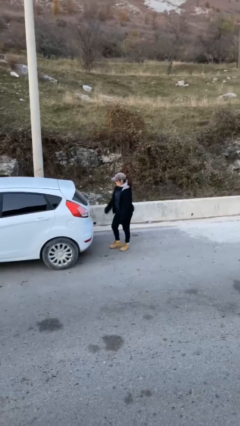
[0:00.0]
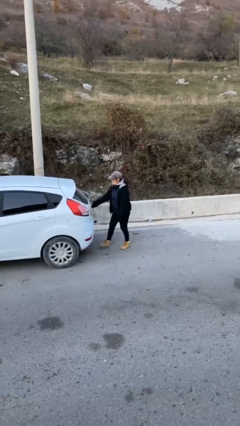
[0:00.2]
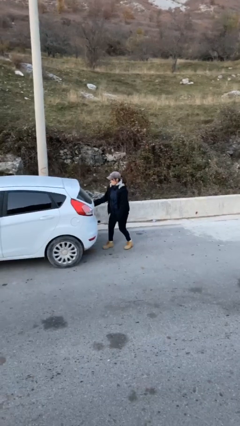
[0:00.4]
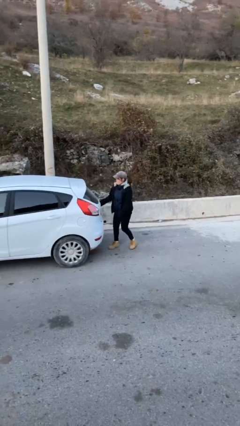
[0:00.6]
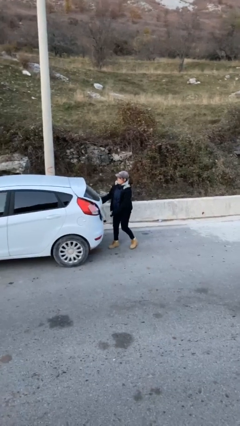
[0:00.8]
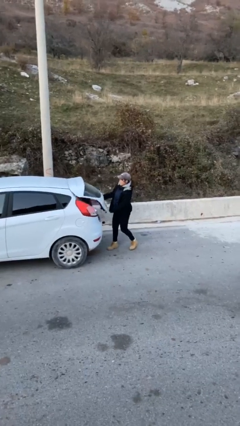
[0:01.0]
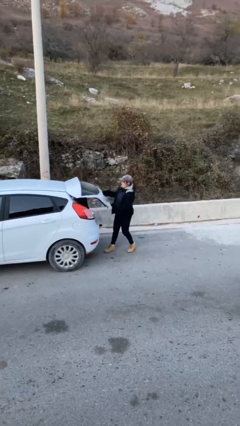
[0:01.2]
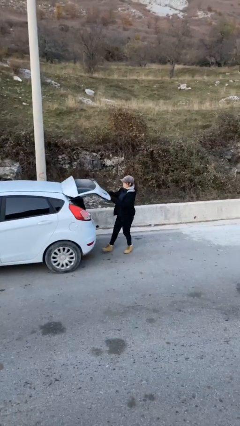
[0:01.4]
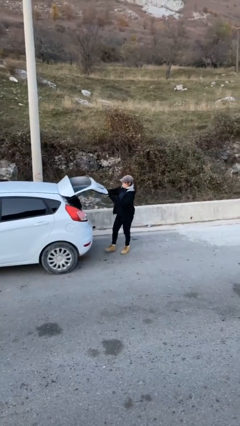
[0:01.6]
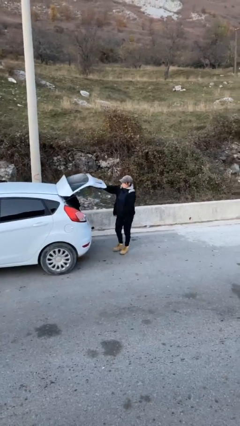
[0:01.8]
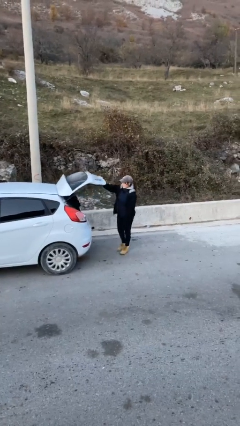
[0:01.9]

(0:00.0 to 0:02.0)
person opens car trunk

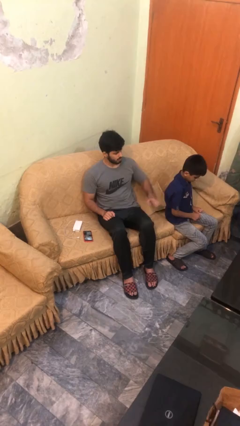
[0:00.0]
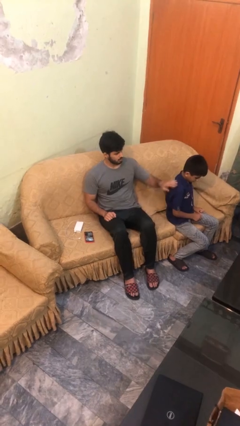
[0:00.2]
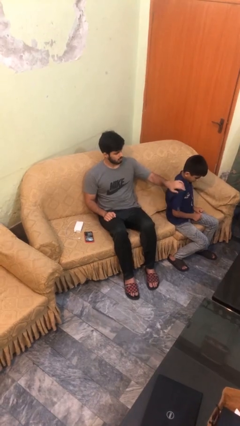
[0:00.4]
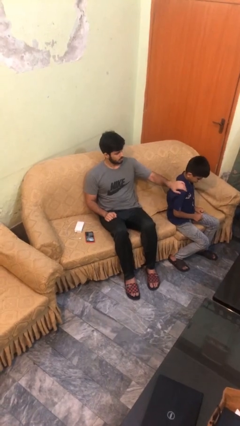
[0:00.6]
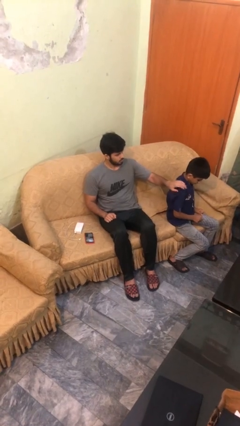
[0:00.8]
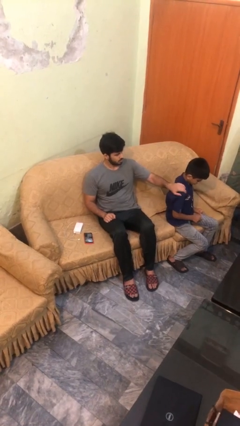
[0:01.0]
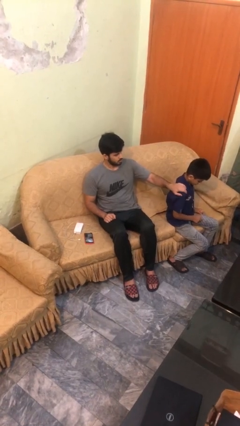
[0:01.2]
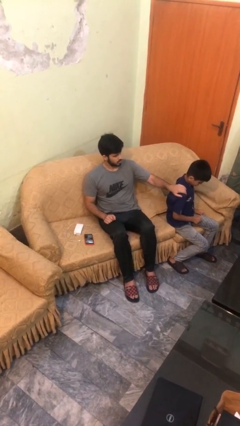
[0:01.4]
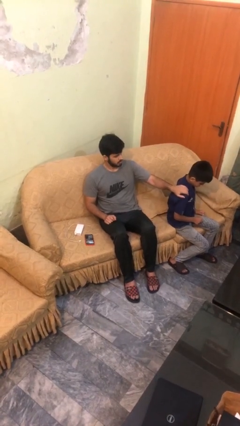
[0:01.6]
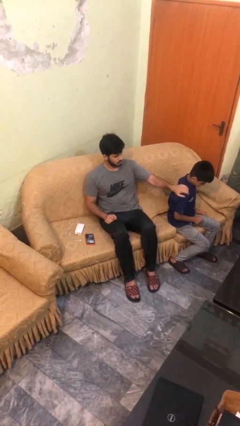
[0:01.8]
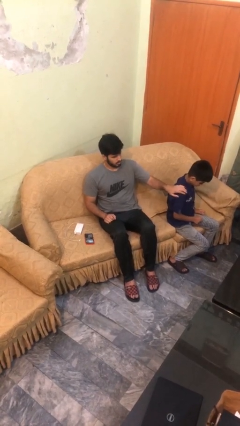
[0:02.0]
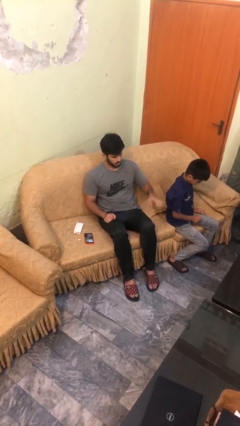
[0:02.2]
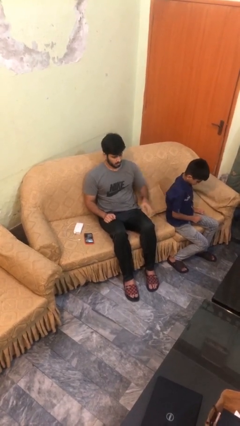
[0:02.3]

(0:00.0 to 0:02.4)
person pounds shoulders of person

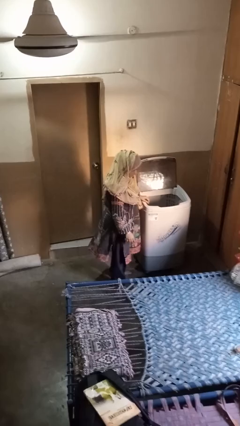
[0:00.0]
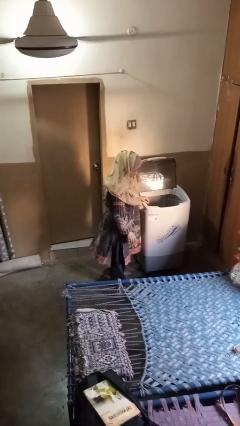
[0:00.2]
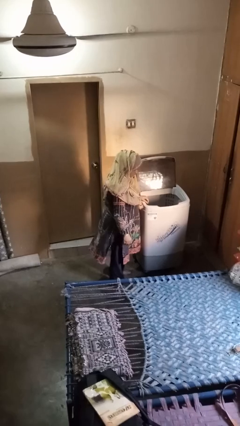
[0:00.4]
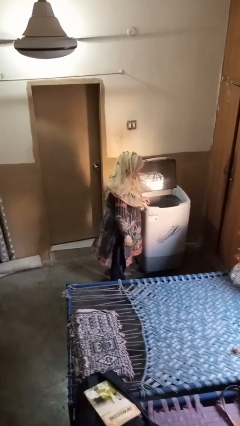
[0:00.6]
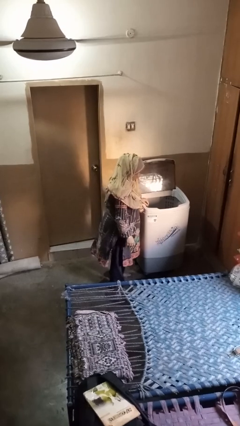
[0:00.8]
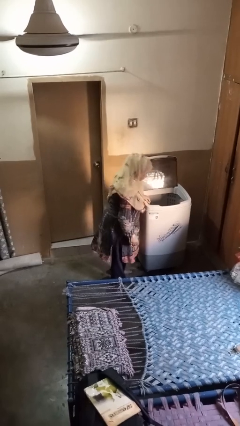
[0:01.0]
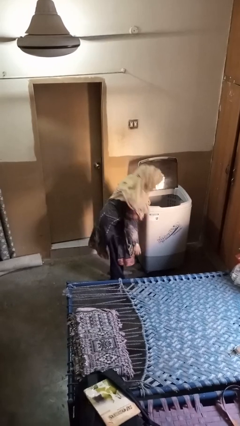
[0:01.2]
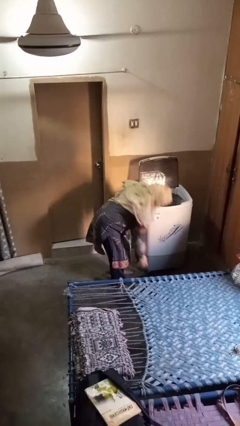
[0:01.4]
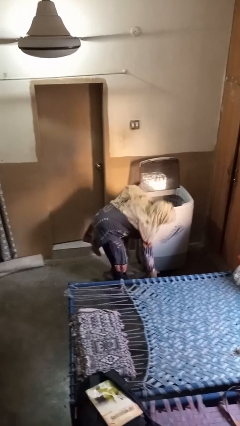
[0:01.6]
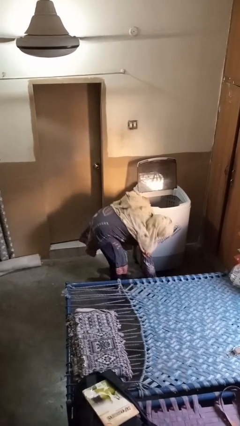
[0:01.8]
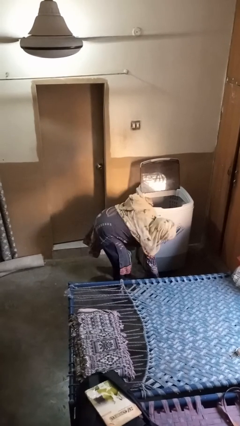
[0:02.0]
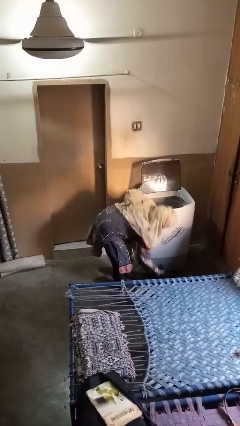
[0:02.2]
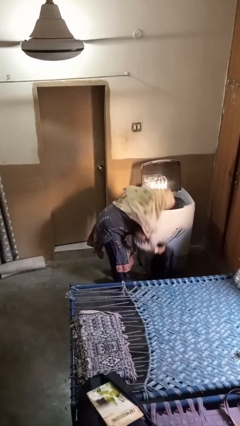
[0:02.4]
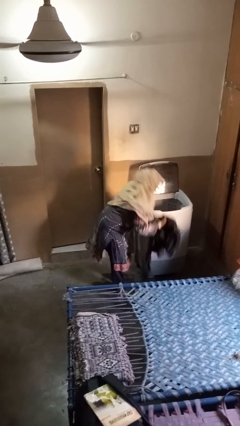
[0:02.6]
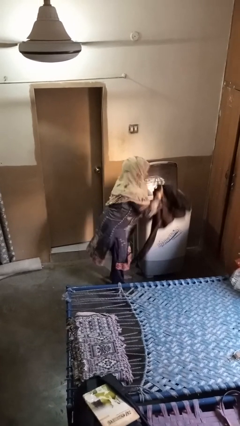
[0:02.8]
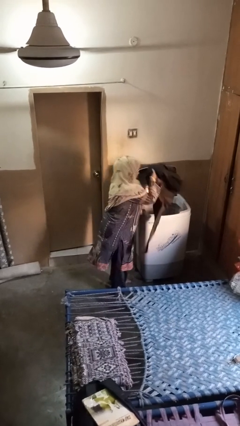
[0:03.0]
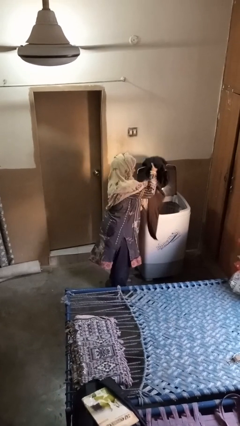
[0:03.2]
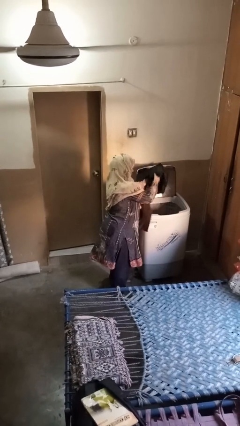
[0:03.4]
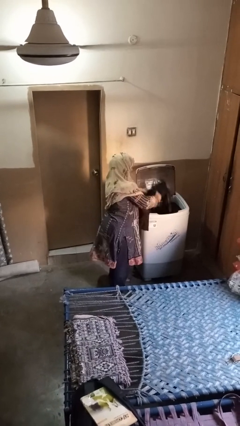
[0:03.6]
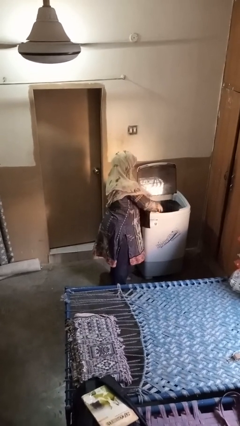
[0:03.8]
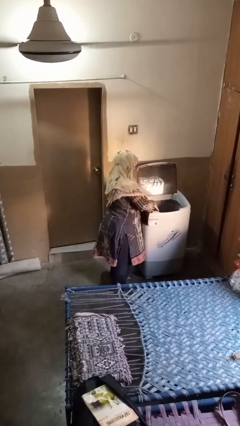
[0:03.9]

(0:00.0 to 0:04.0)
person loads clotheswasher

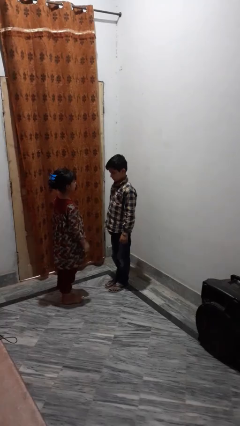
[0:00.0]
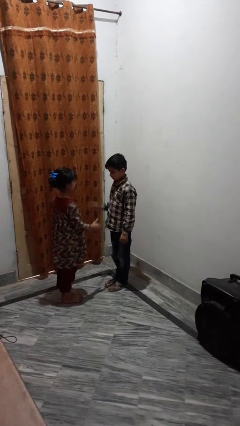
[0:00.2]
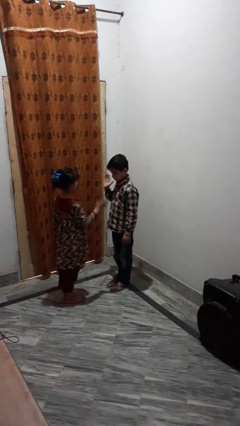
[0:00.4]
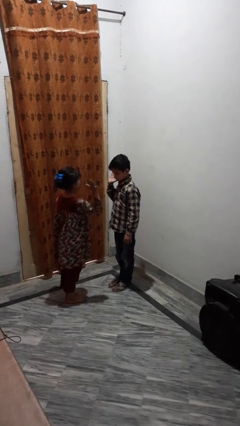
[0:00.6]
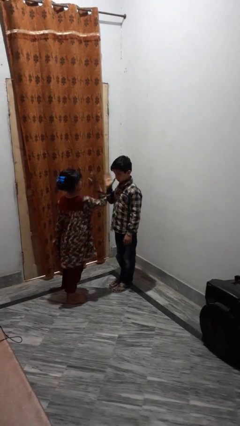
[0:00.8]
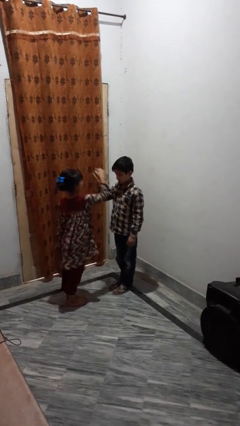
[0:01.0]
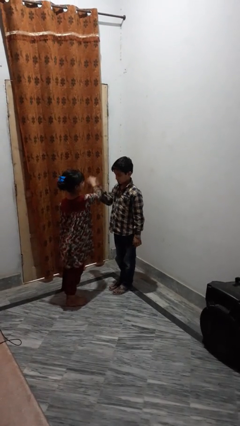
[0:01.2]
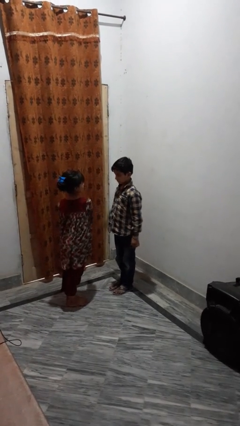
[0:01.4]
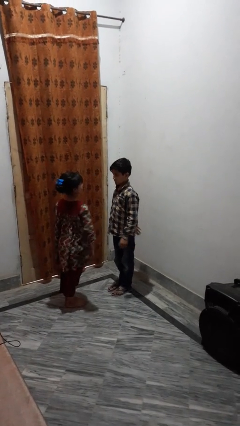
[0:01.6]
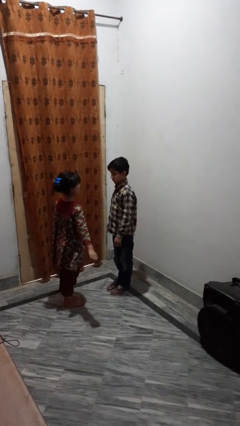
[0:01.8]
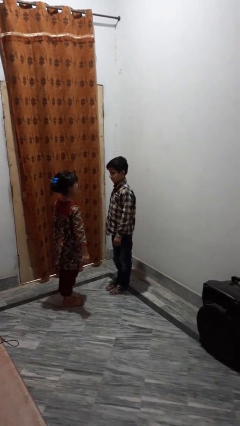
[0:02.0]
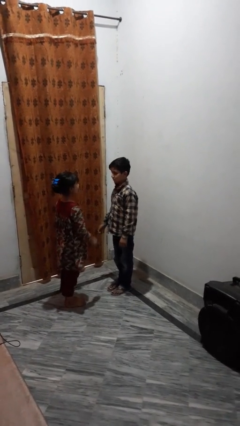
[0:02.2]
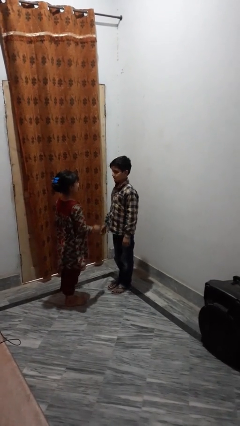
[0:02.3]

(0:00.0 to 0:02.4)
person highfives hand

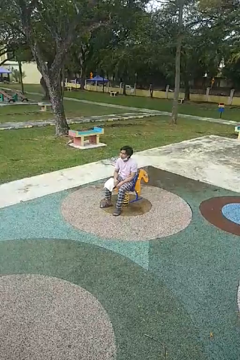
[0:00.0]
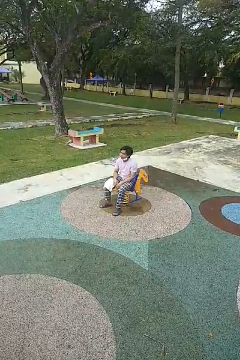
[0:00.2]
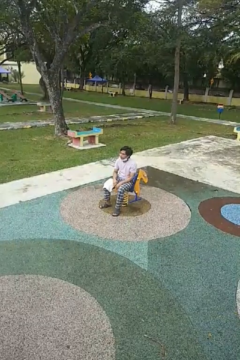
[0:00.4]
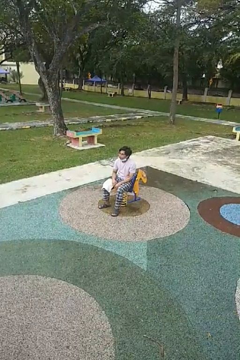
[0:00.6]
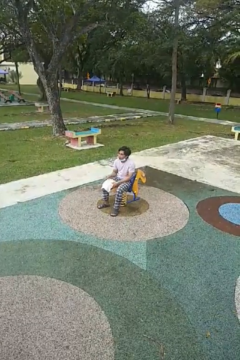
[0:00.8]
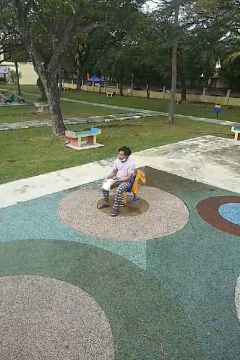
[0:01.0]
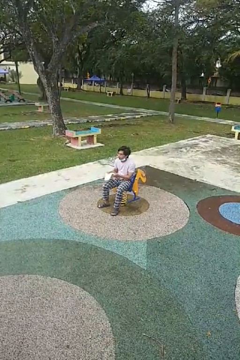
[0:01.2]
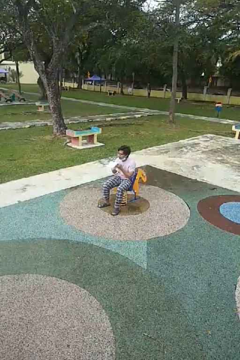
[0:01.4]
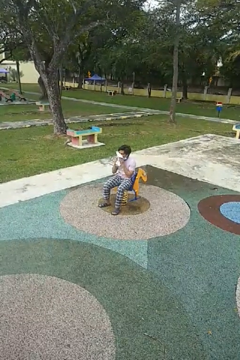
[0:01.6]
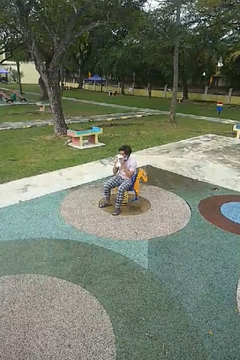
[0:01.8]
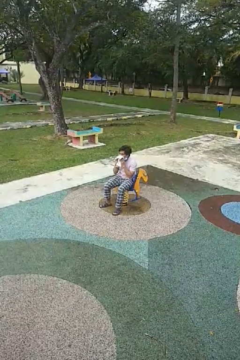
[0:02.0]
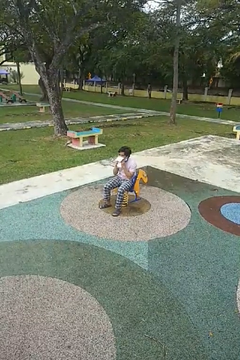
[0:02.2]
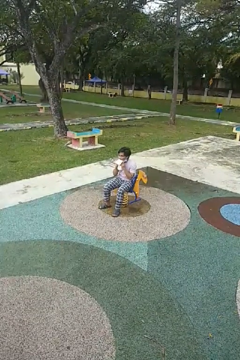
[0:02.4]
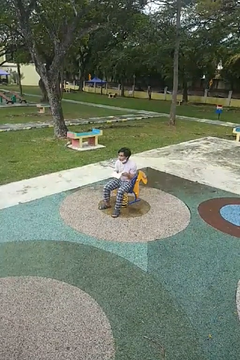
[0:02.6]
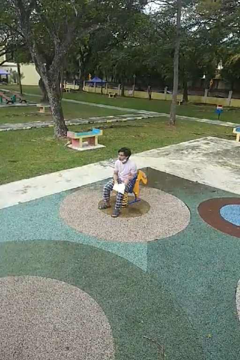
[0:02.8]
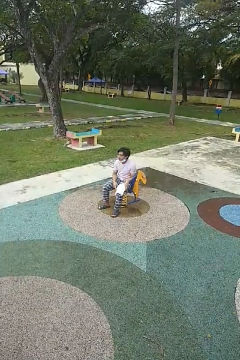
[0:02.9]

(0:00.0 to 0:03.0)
person wipes mouth with napkin

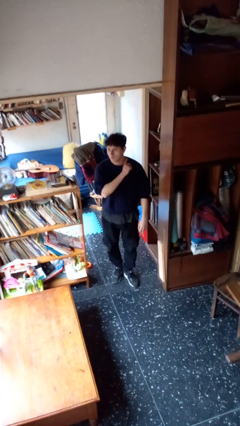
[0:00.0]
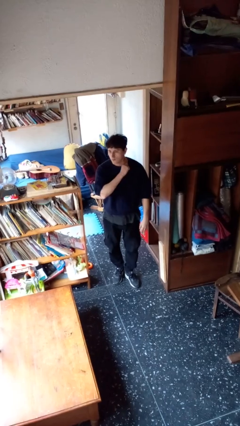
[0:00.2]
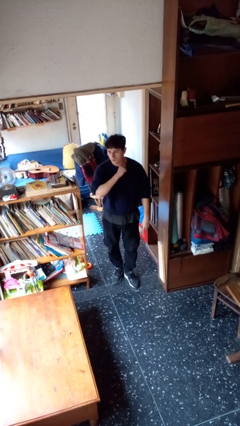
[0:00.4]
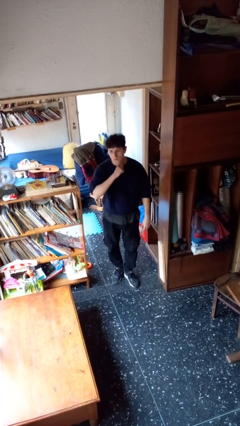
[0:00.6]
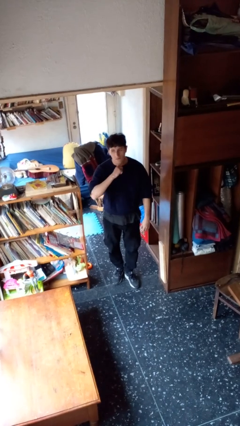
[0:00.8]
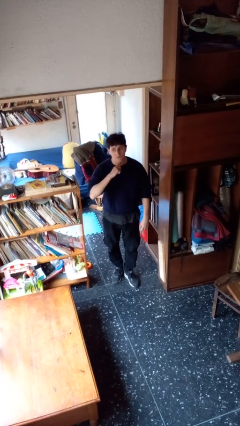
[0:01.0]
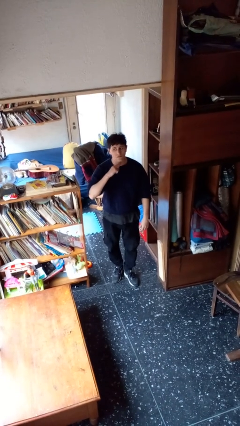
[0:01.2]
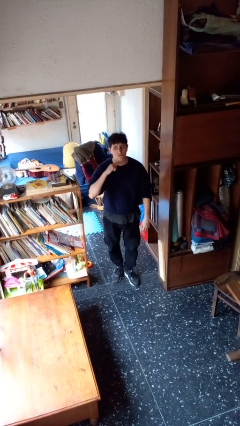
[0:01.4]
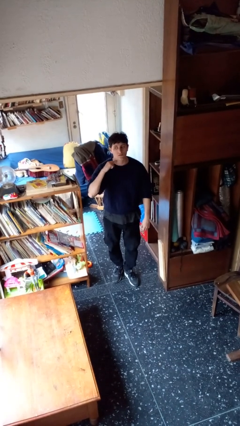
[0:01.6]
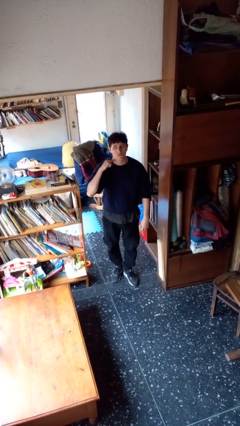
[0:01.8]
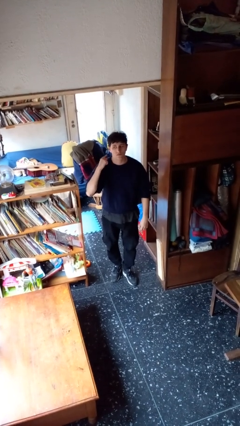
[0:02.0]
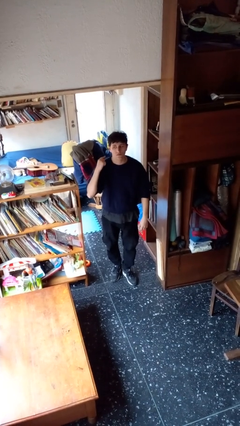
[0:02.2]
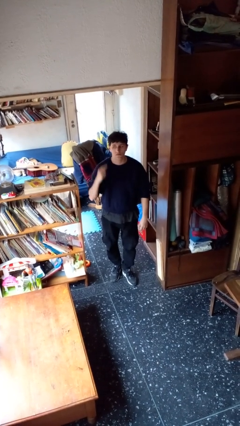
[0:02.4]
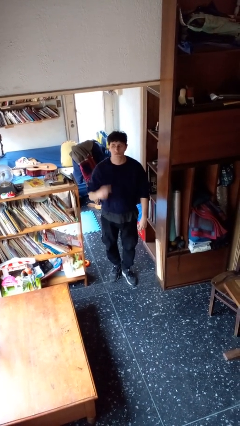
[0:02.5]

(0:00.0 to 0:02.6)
person gestures cut

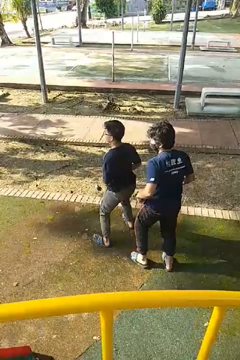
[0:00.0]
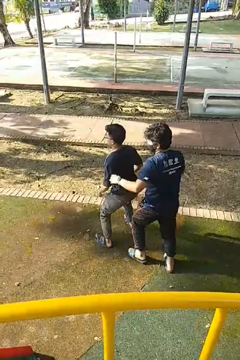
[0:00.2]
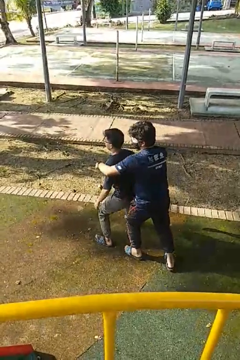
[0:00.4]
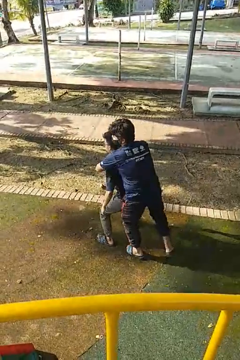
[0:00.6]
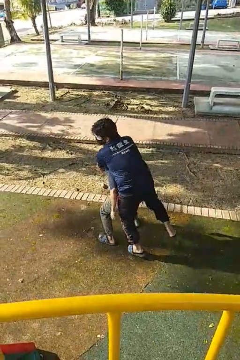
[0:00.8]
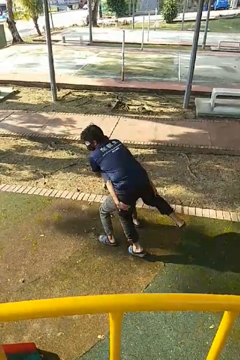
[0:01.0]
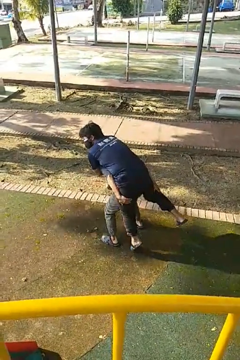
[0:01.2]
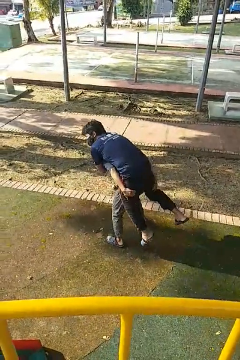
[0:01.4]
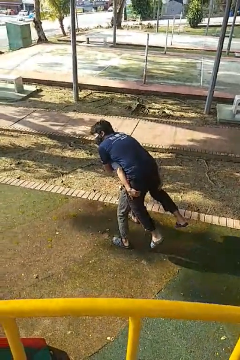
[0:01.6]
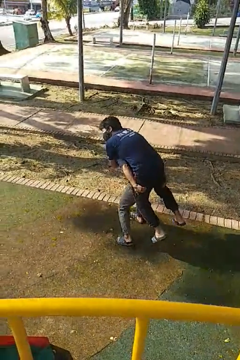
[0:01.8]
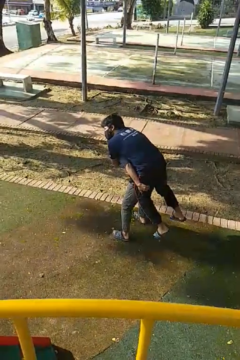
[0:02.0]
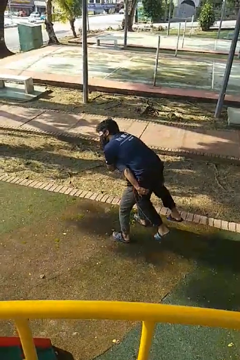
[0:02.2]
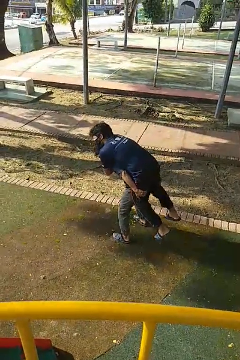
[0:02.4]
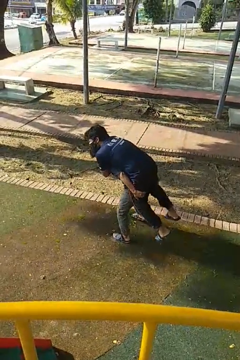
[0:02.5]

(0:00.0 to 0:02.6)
person carries person over shoulder
